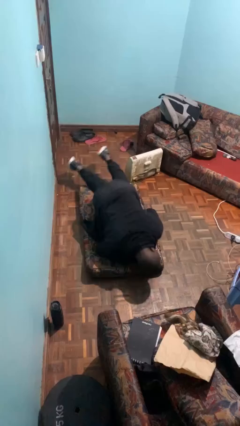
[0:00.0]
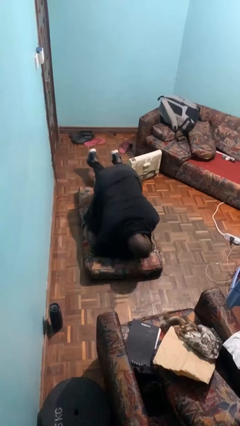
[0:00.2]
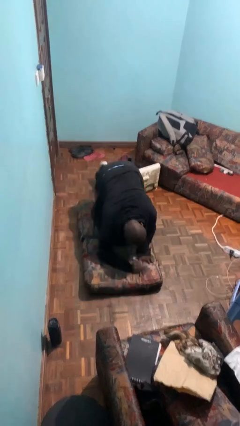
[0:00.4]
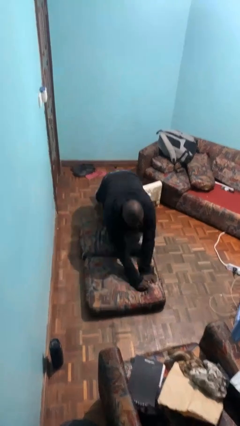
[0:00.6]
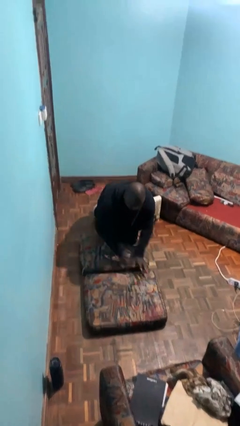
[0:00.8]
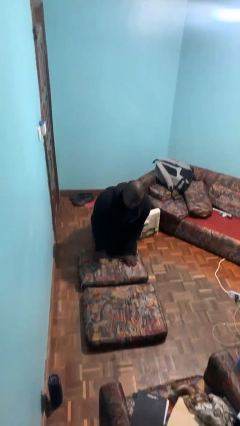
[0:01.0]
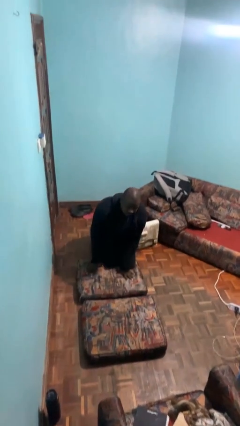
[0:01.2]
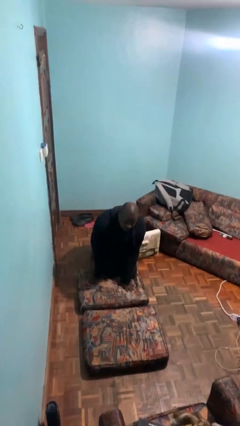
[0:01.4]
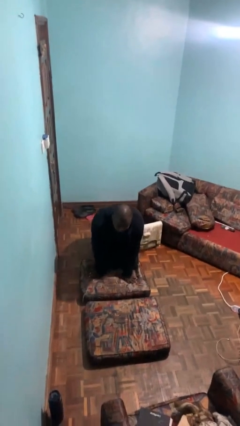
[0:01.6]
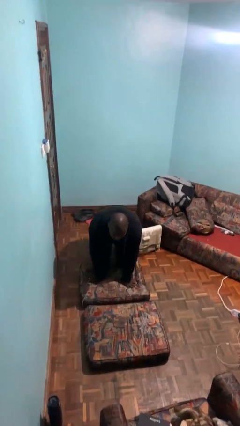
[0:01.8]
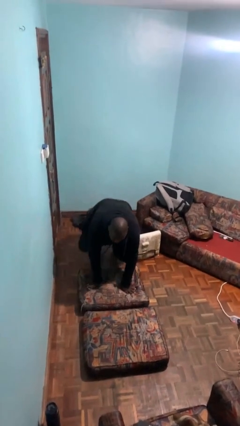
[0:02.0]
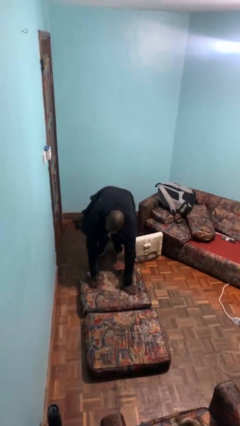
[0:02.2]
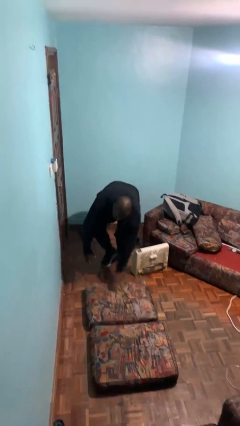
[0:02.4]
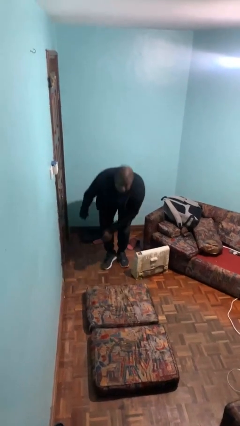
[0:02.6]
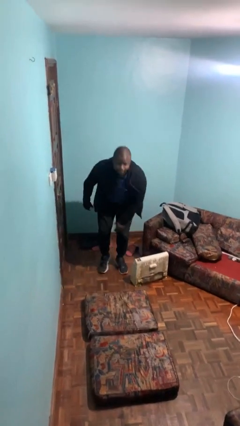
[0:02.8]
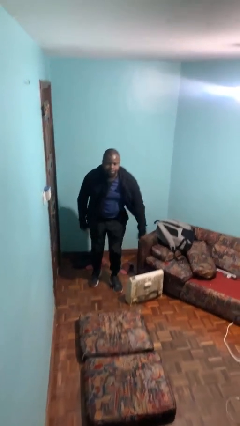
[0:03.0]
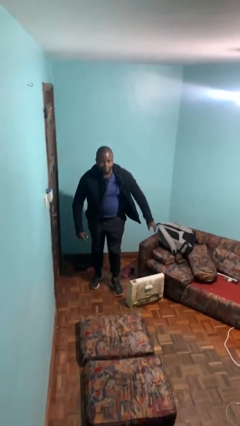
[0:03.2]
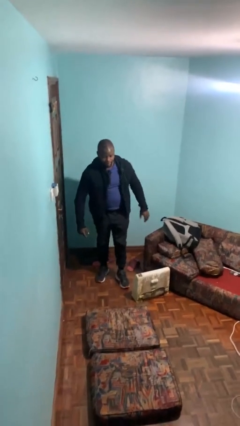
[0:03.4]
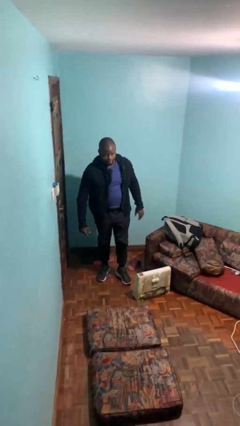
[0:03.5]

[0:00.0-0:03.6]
person stands up from floor

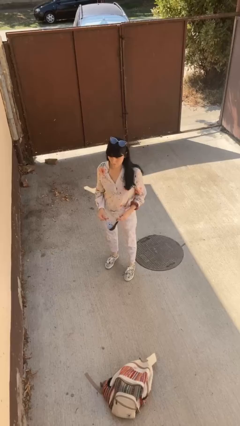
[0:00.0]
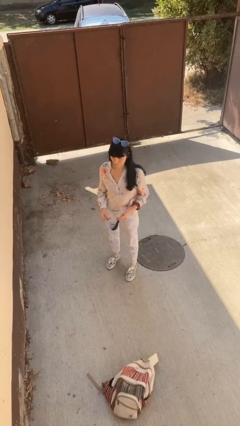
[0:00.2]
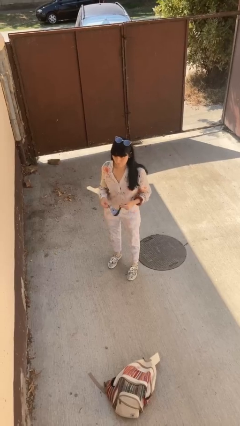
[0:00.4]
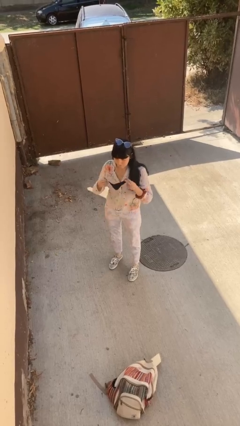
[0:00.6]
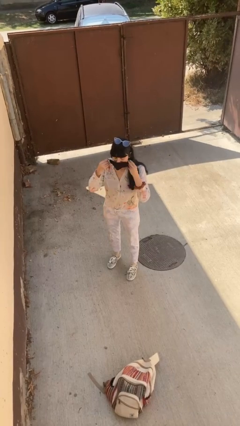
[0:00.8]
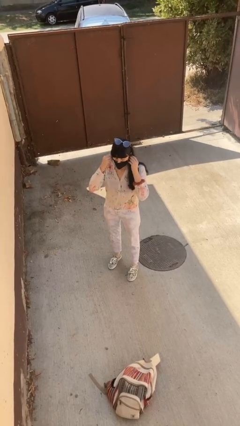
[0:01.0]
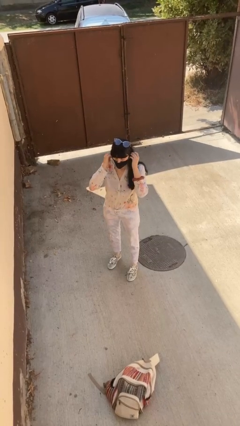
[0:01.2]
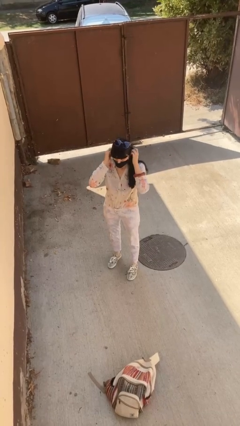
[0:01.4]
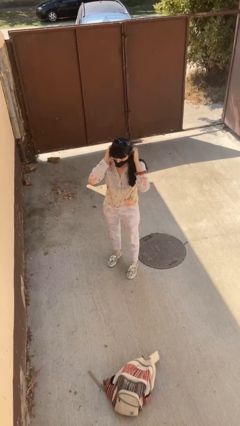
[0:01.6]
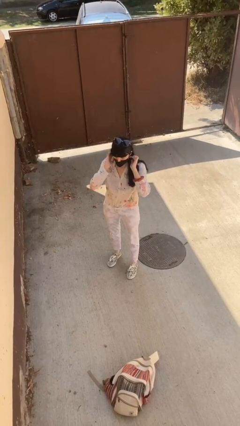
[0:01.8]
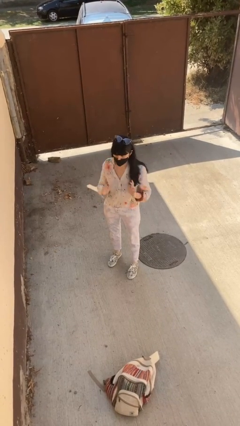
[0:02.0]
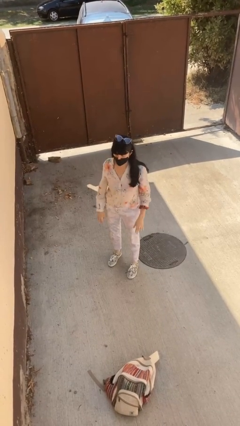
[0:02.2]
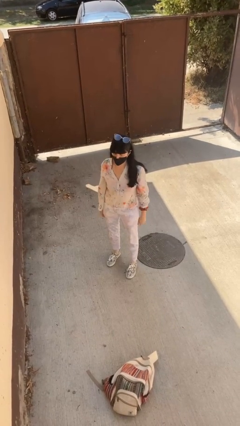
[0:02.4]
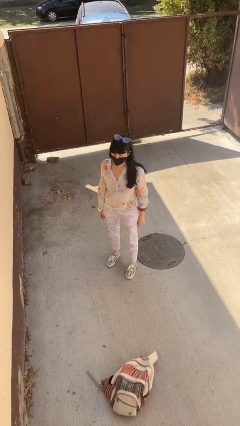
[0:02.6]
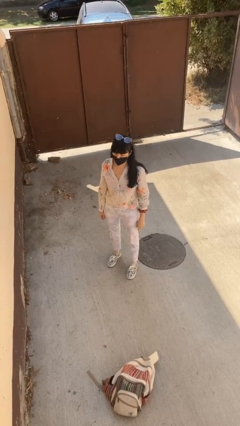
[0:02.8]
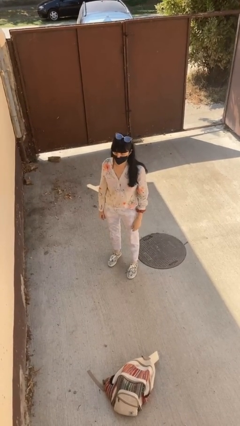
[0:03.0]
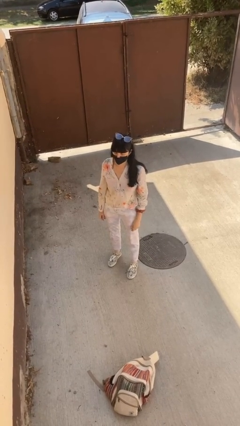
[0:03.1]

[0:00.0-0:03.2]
person puts on facemask

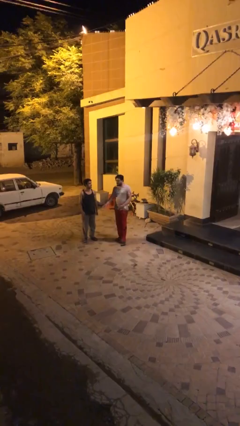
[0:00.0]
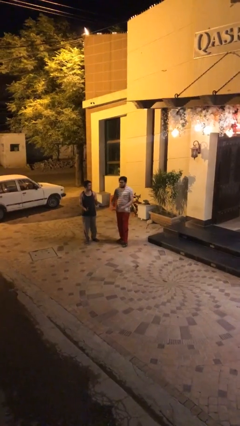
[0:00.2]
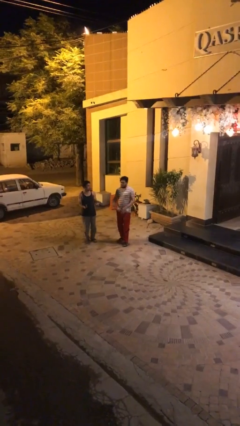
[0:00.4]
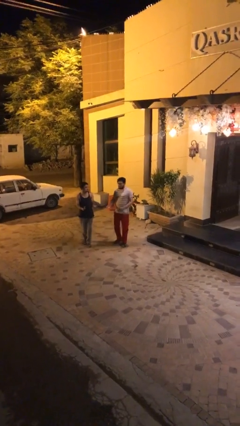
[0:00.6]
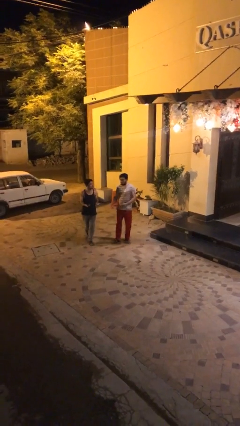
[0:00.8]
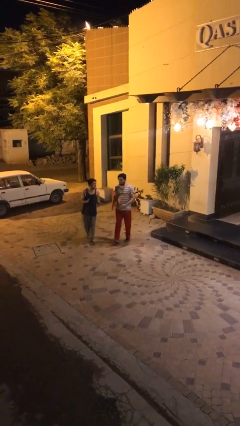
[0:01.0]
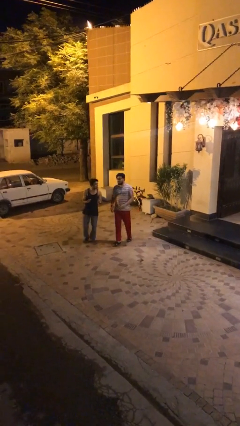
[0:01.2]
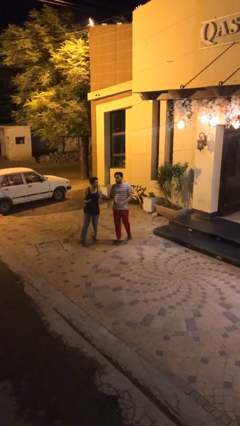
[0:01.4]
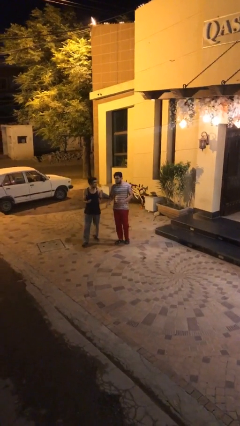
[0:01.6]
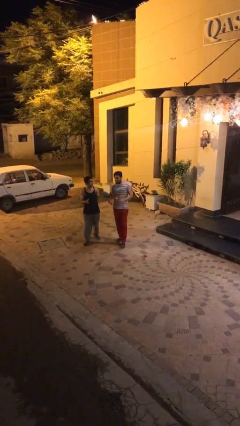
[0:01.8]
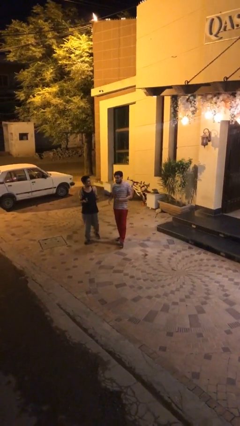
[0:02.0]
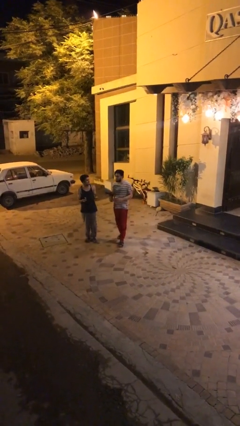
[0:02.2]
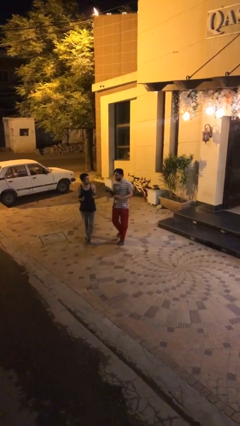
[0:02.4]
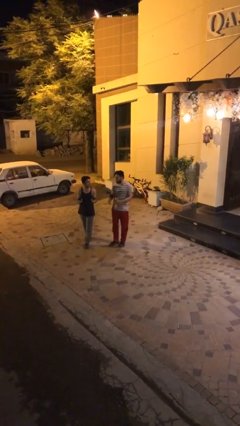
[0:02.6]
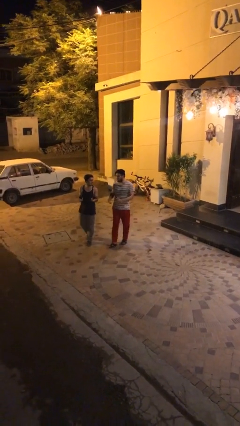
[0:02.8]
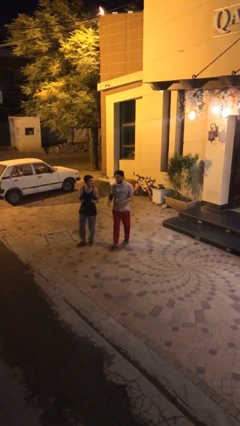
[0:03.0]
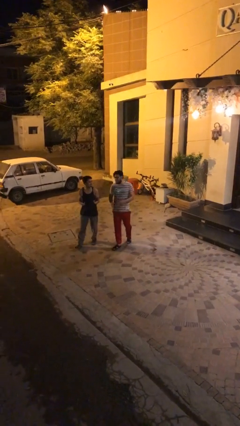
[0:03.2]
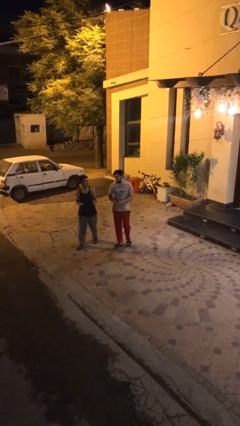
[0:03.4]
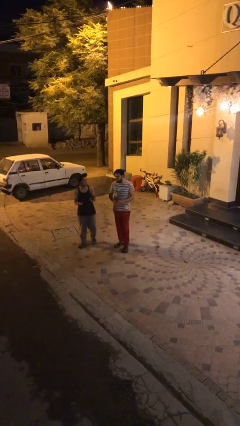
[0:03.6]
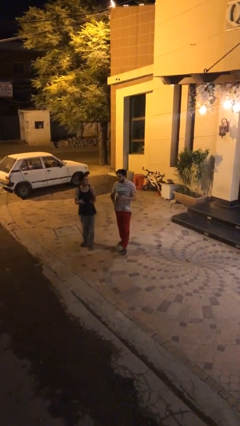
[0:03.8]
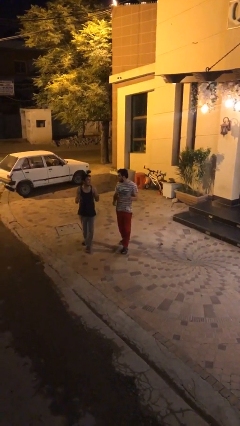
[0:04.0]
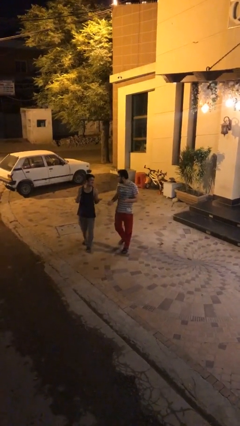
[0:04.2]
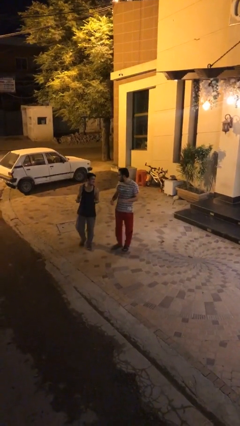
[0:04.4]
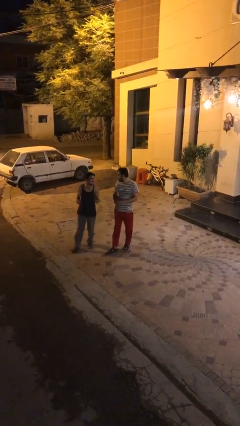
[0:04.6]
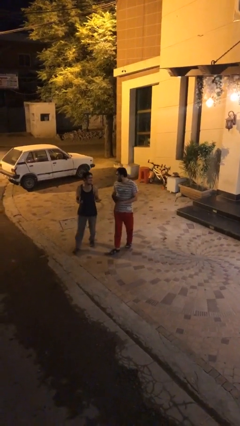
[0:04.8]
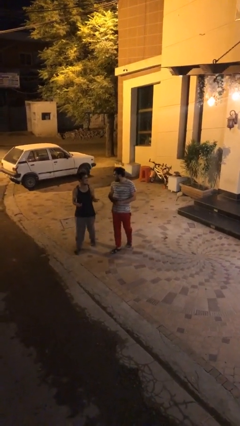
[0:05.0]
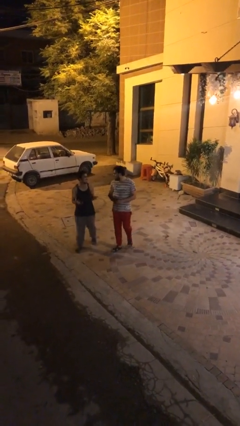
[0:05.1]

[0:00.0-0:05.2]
person talks to person

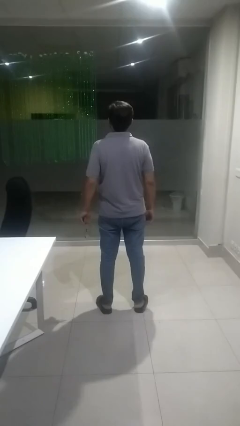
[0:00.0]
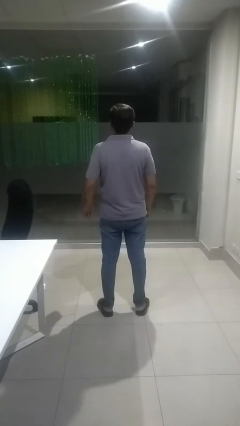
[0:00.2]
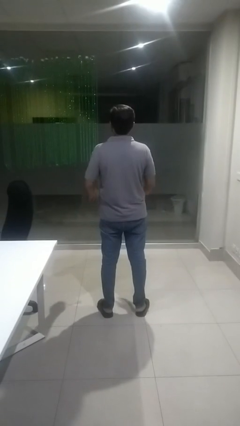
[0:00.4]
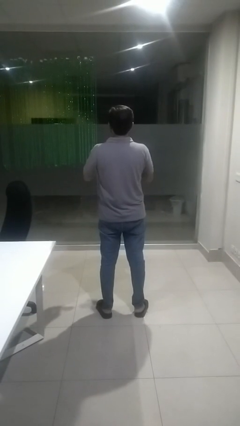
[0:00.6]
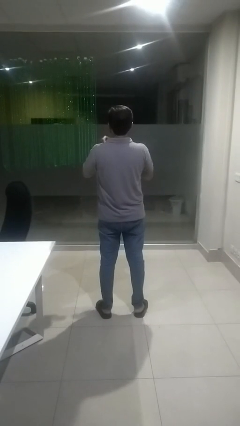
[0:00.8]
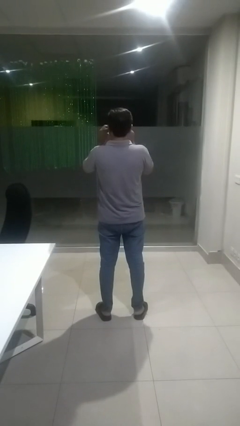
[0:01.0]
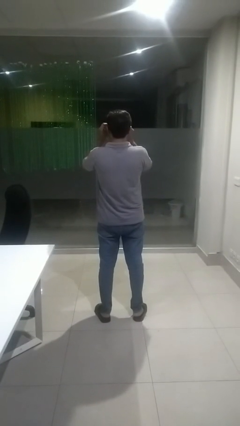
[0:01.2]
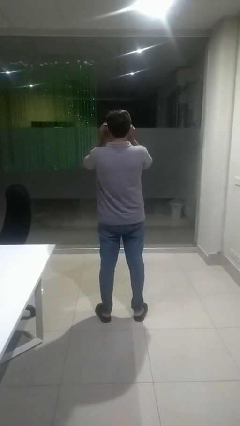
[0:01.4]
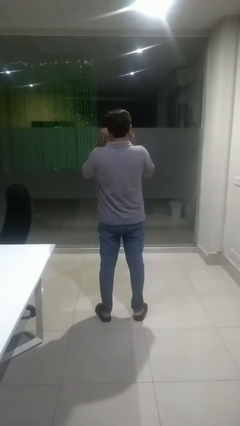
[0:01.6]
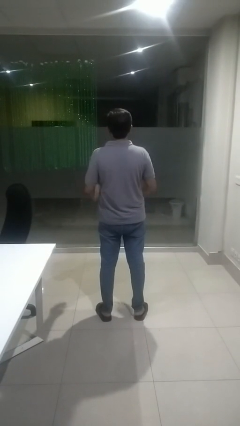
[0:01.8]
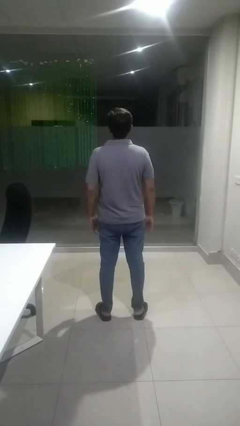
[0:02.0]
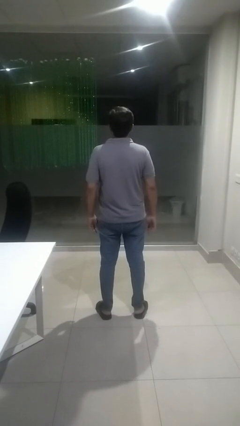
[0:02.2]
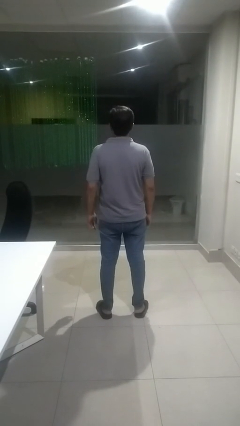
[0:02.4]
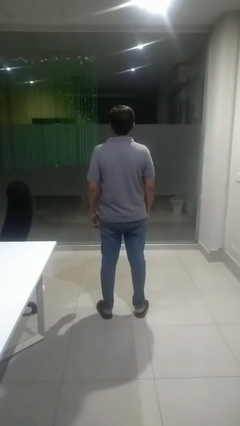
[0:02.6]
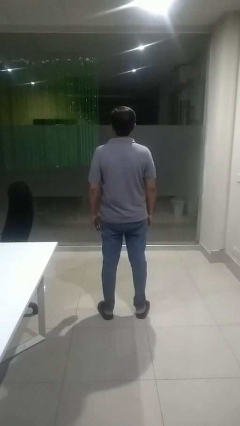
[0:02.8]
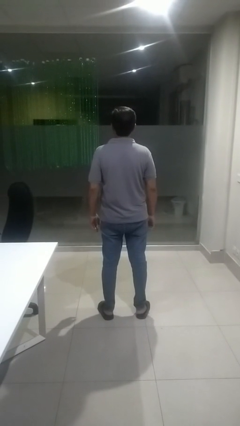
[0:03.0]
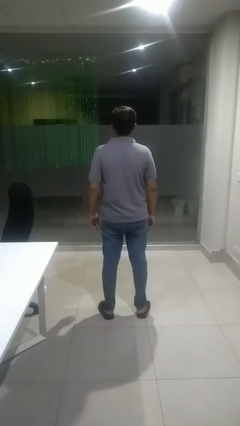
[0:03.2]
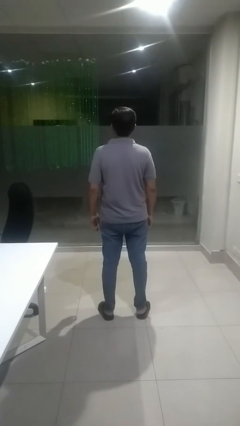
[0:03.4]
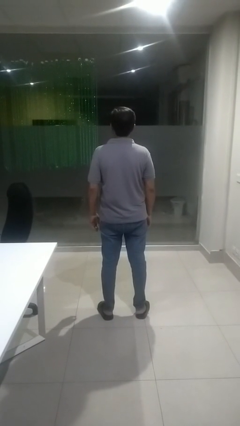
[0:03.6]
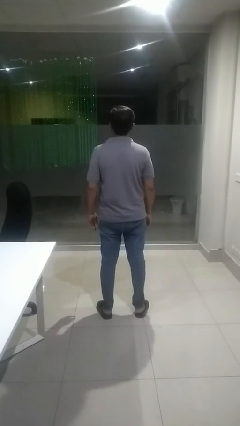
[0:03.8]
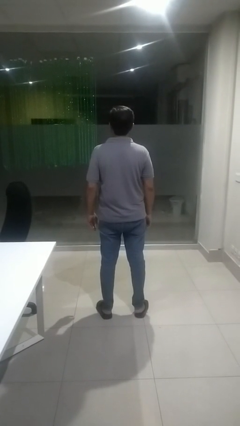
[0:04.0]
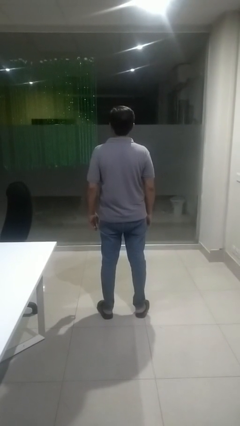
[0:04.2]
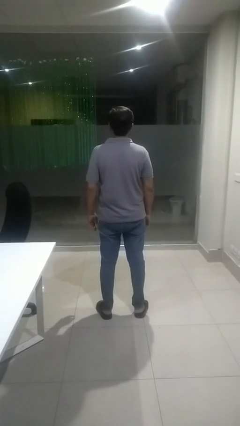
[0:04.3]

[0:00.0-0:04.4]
person puts on glasses

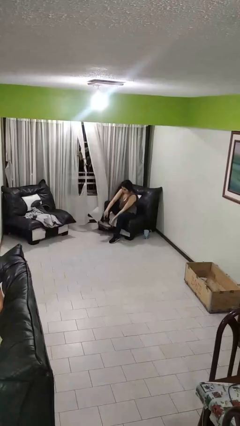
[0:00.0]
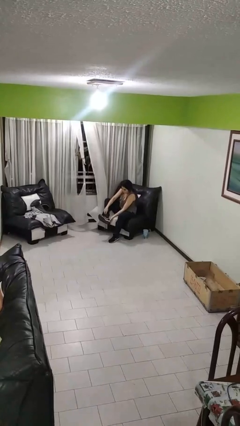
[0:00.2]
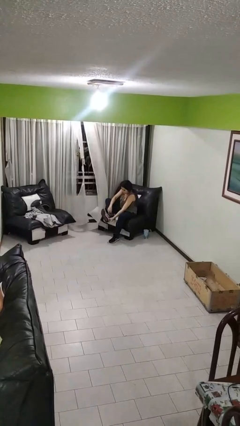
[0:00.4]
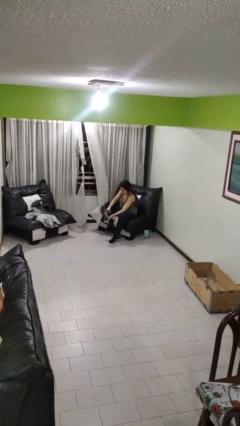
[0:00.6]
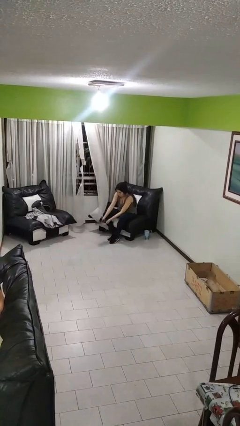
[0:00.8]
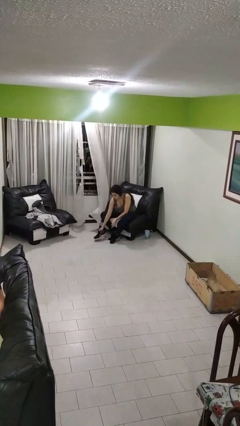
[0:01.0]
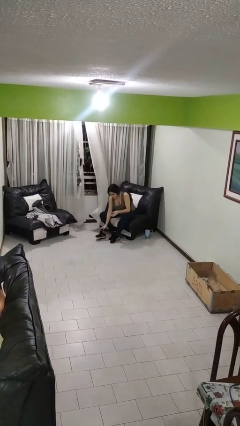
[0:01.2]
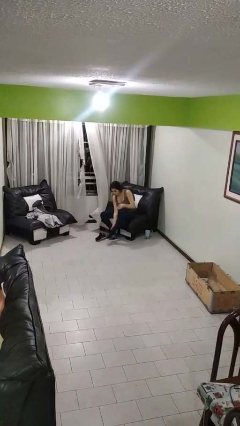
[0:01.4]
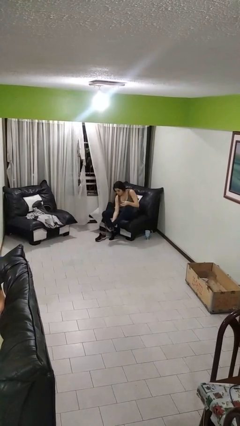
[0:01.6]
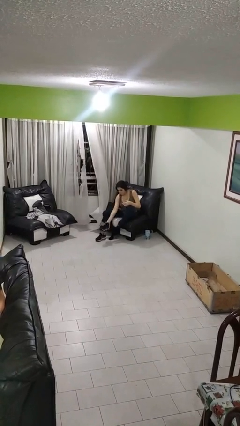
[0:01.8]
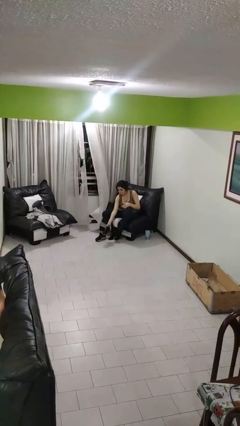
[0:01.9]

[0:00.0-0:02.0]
person takes off shoes
